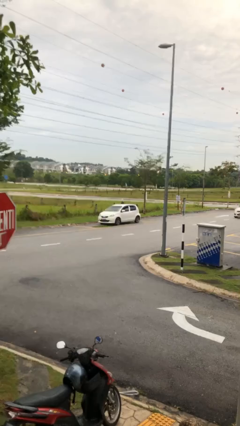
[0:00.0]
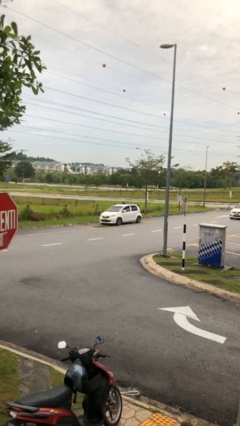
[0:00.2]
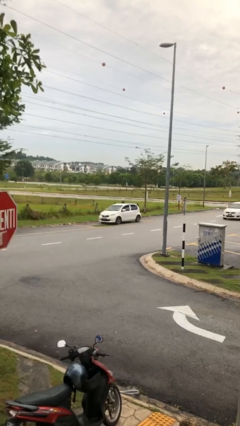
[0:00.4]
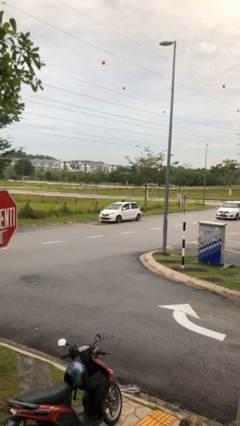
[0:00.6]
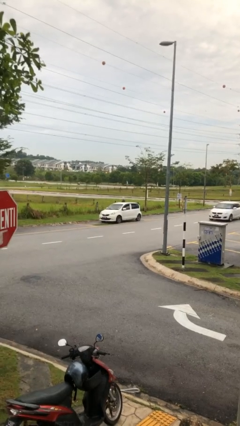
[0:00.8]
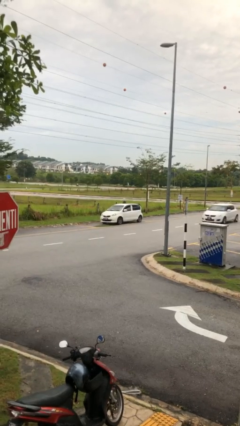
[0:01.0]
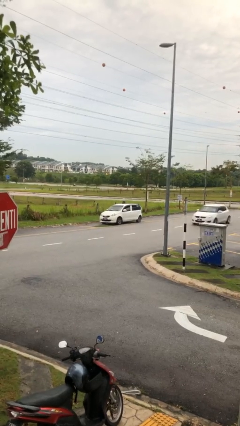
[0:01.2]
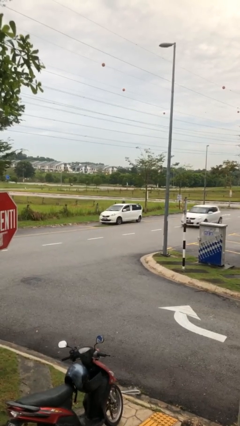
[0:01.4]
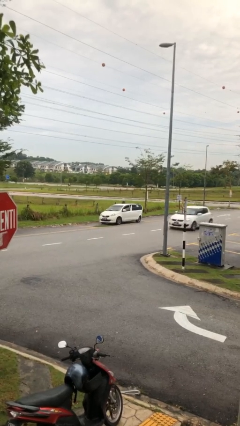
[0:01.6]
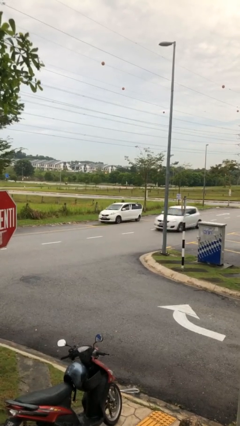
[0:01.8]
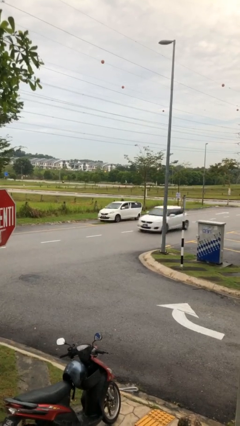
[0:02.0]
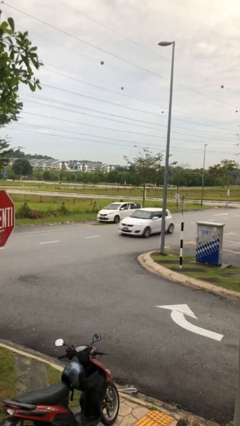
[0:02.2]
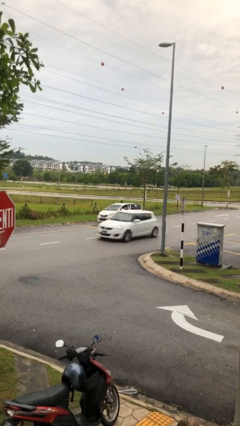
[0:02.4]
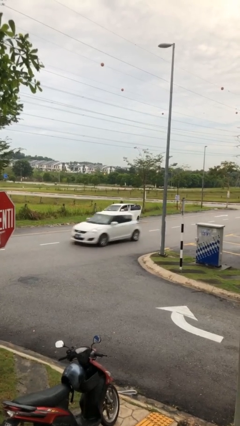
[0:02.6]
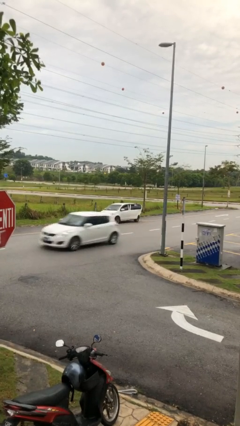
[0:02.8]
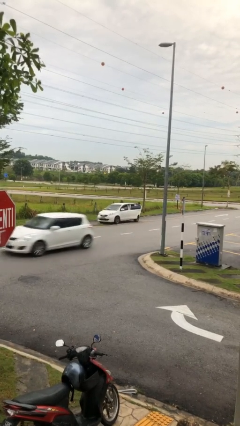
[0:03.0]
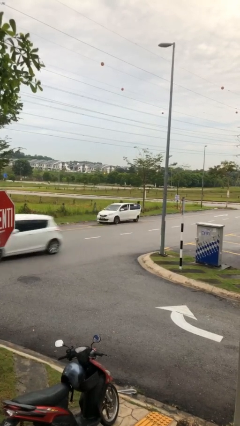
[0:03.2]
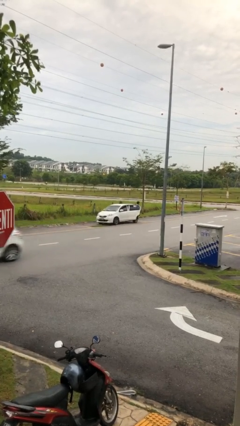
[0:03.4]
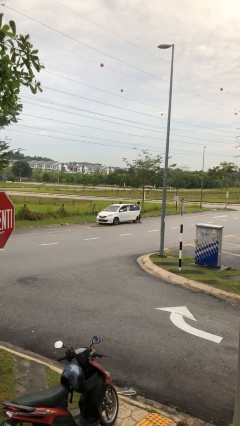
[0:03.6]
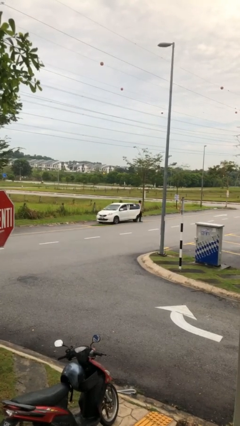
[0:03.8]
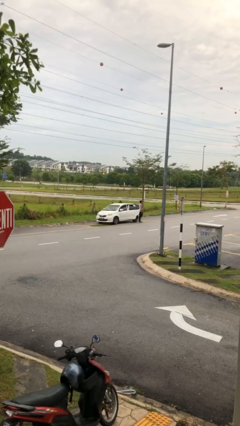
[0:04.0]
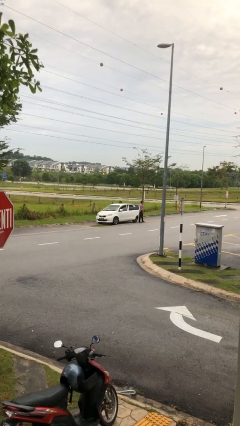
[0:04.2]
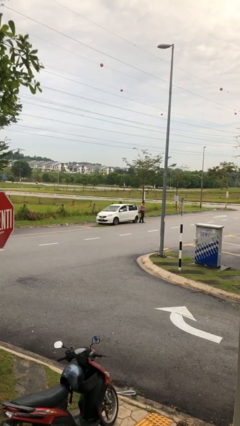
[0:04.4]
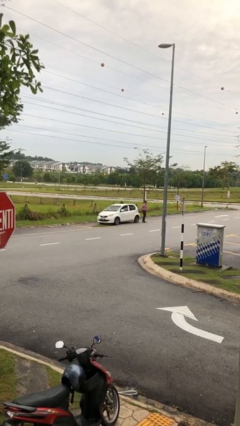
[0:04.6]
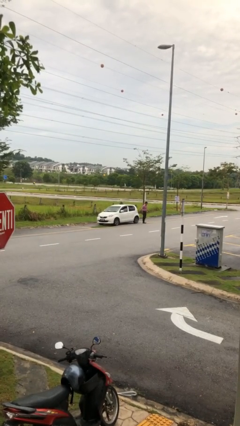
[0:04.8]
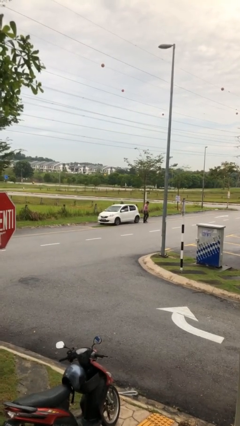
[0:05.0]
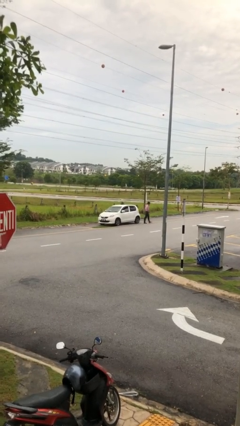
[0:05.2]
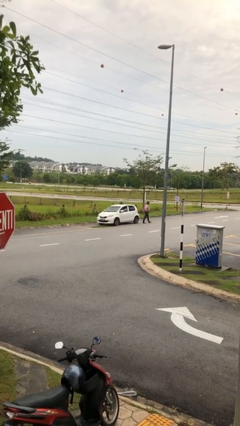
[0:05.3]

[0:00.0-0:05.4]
car drops off person

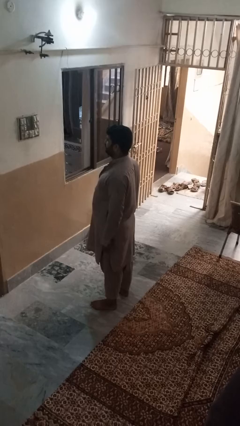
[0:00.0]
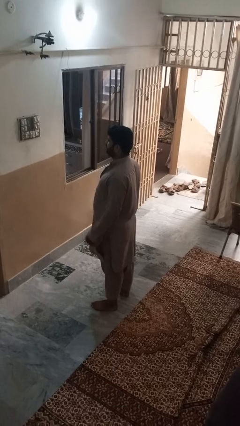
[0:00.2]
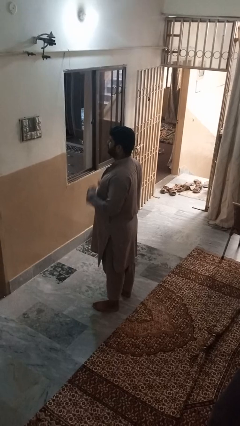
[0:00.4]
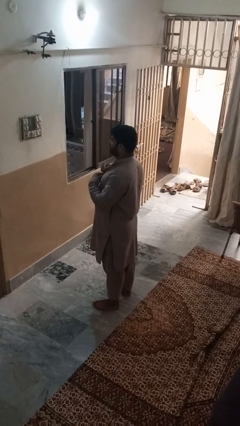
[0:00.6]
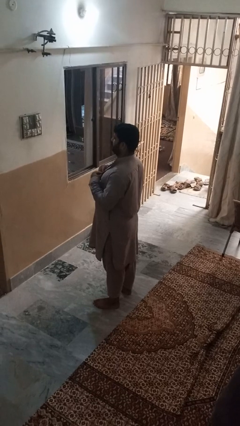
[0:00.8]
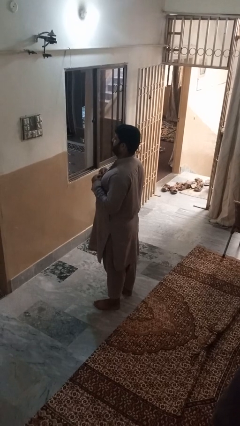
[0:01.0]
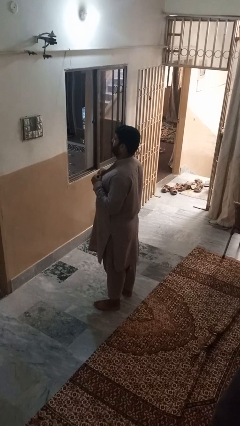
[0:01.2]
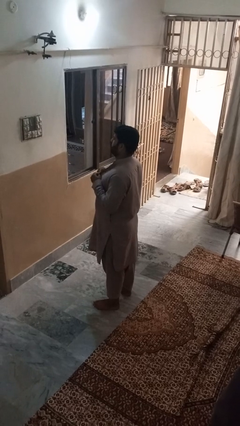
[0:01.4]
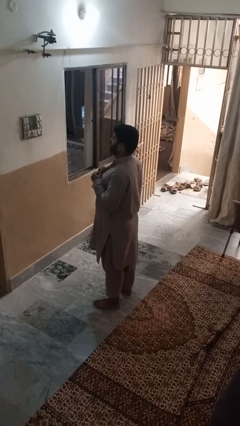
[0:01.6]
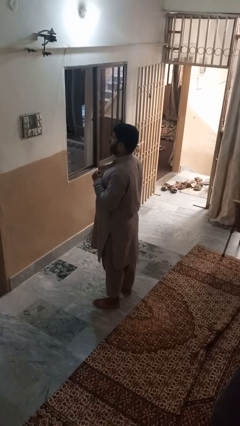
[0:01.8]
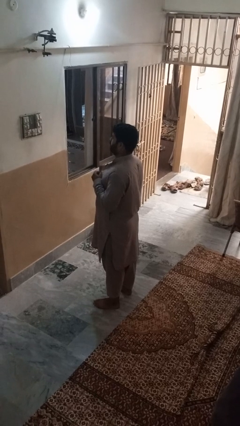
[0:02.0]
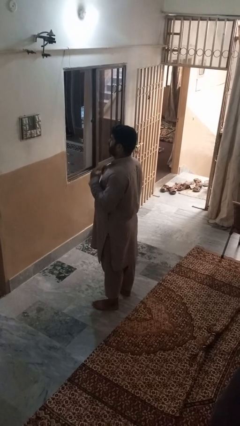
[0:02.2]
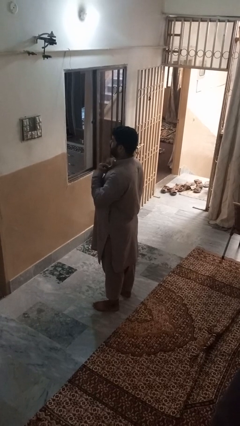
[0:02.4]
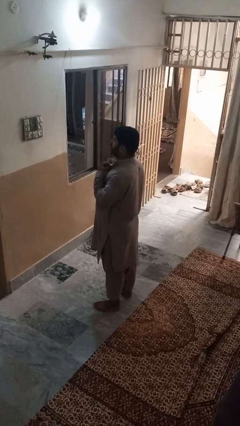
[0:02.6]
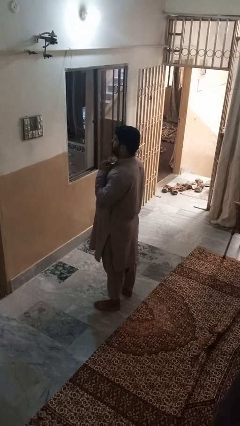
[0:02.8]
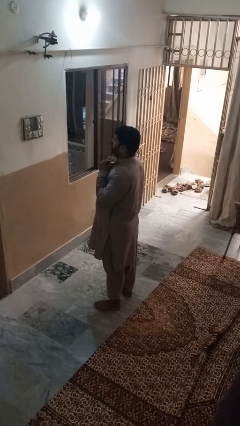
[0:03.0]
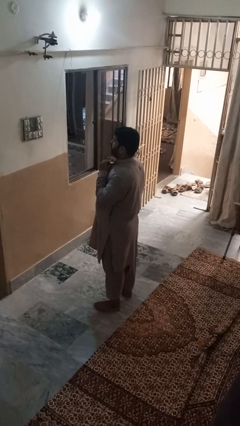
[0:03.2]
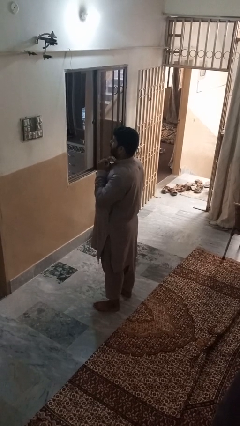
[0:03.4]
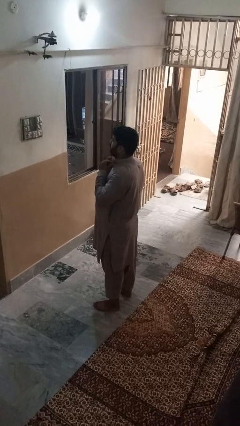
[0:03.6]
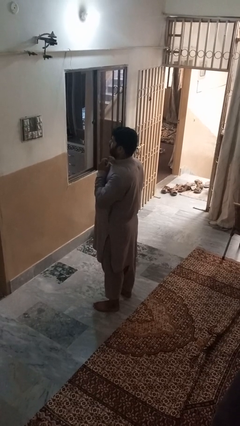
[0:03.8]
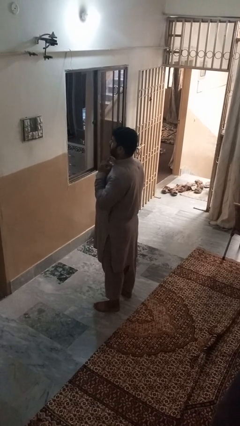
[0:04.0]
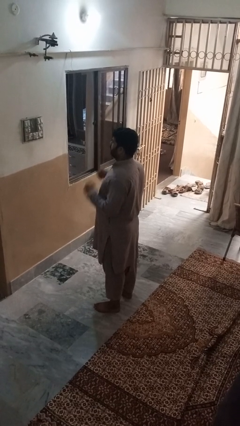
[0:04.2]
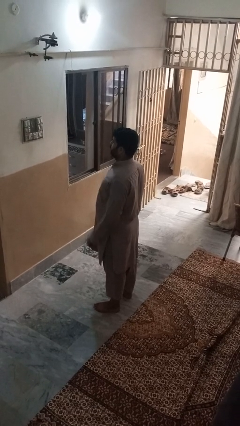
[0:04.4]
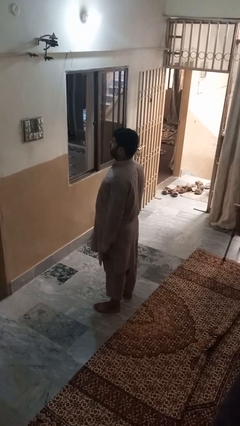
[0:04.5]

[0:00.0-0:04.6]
person buttons shirt

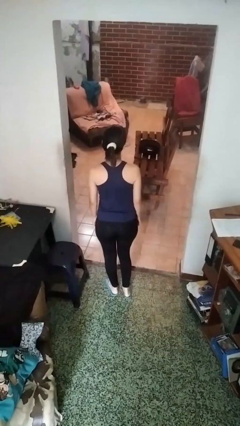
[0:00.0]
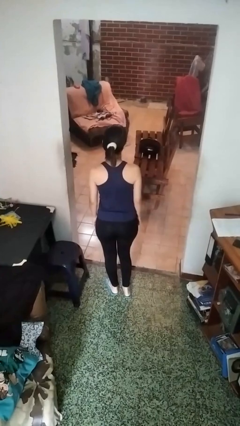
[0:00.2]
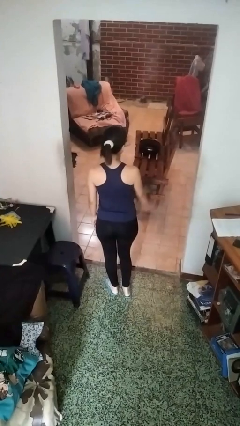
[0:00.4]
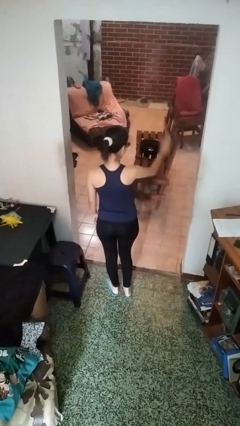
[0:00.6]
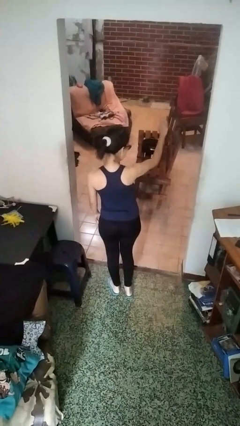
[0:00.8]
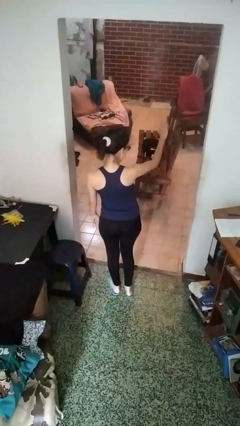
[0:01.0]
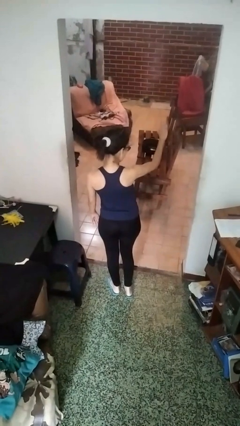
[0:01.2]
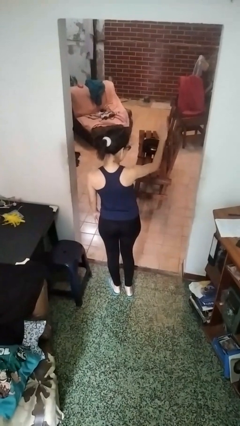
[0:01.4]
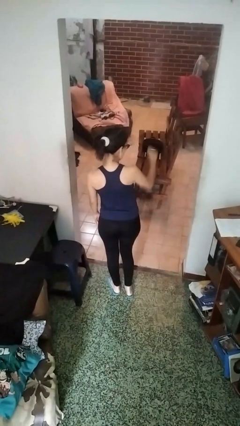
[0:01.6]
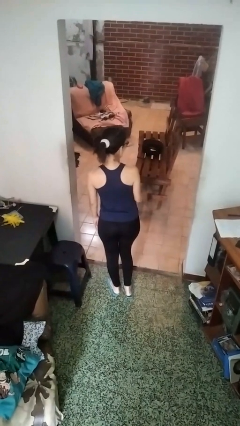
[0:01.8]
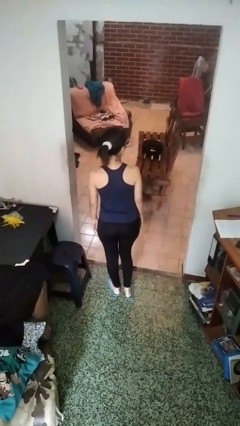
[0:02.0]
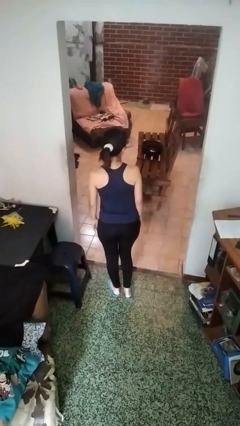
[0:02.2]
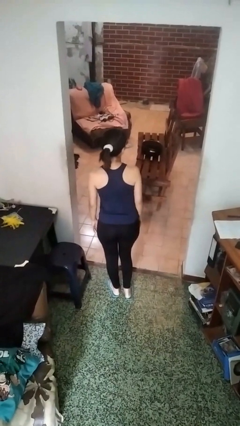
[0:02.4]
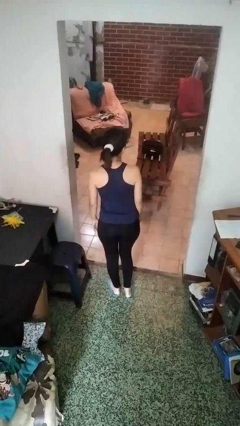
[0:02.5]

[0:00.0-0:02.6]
person gestures stop

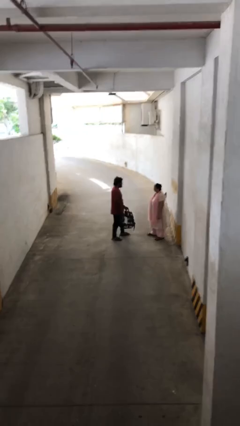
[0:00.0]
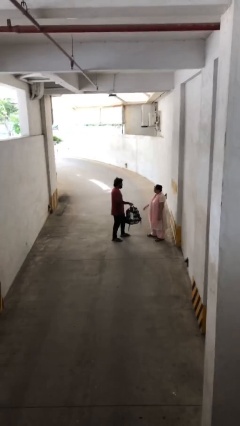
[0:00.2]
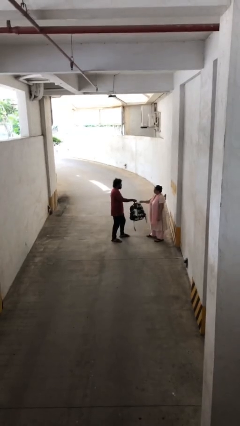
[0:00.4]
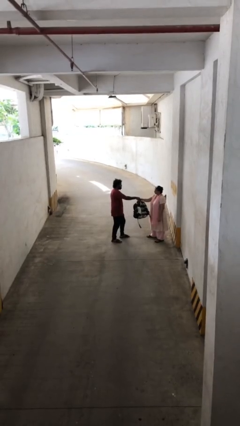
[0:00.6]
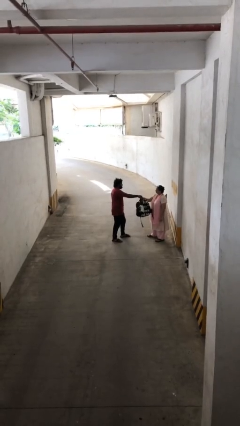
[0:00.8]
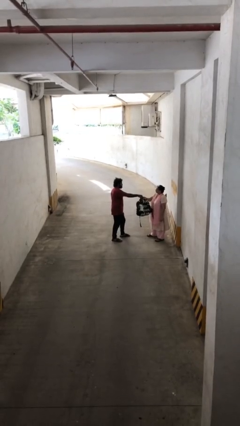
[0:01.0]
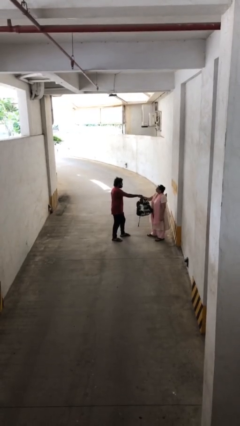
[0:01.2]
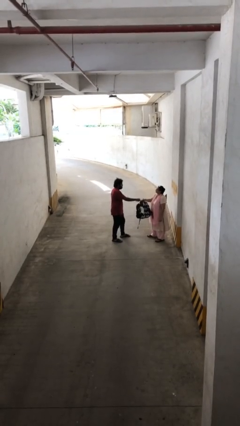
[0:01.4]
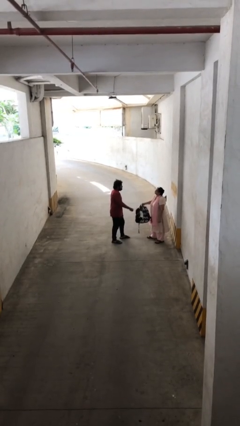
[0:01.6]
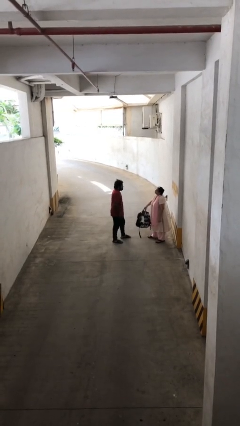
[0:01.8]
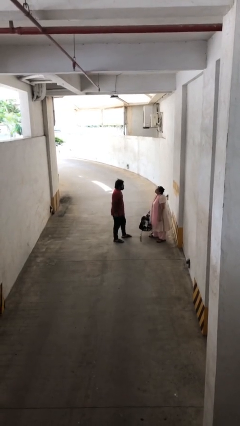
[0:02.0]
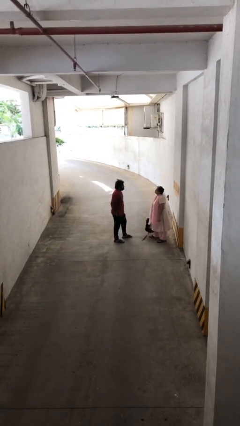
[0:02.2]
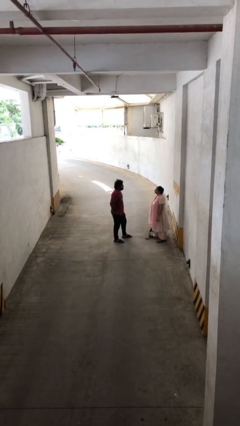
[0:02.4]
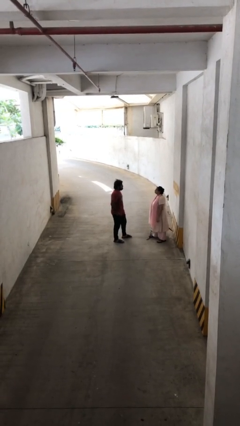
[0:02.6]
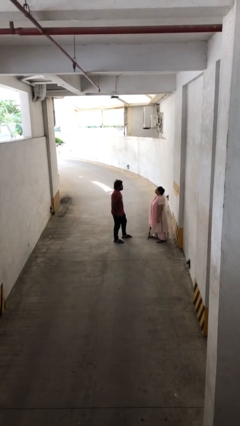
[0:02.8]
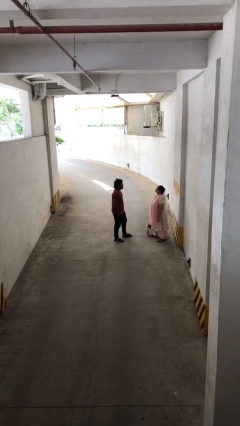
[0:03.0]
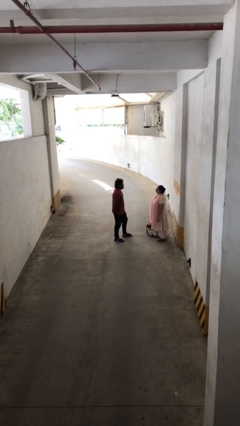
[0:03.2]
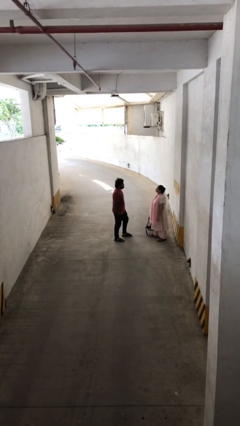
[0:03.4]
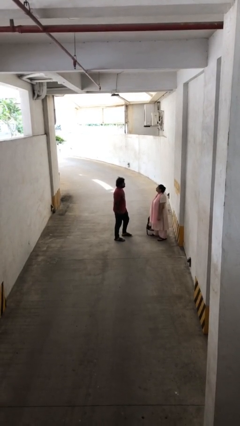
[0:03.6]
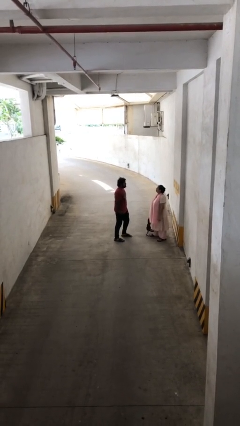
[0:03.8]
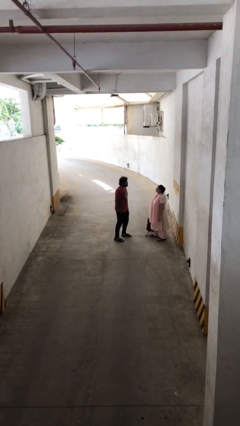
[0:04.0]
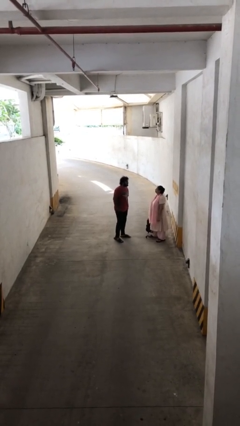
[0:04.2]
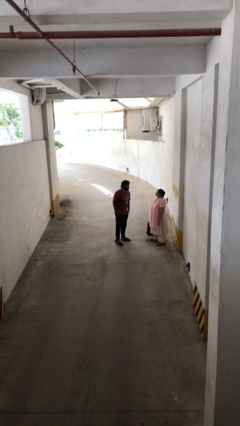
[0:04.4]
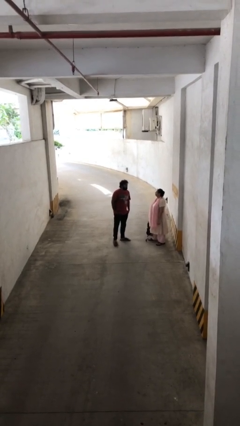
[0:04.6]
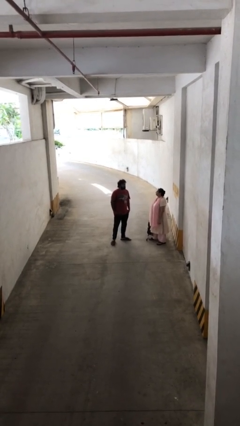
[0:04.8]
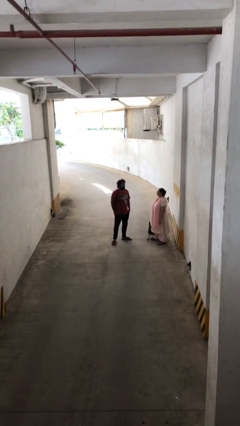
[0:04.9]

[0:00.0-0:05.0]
person transfers object to person
